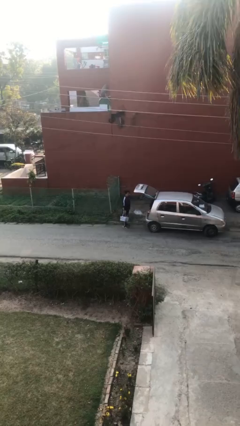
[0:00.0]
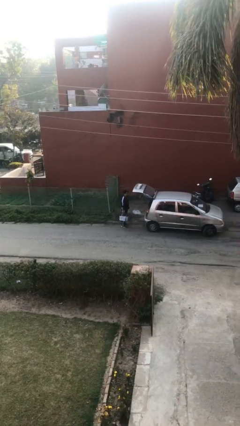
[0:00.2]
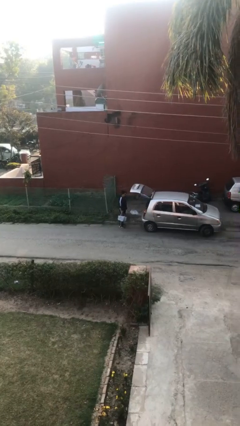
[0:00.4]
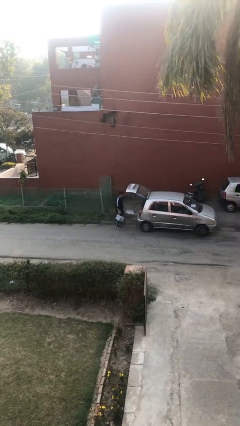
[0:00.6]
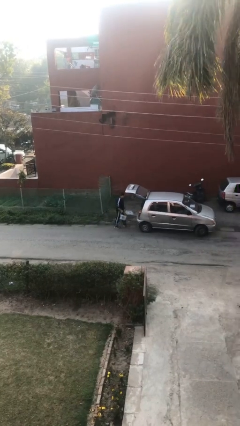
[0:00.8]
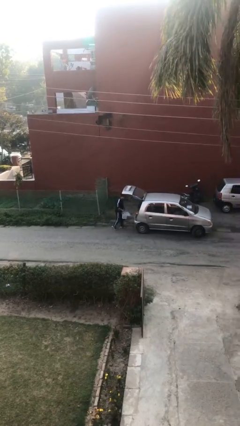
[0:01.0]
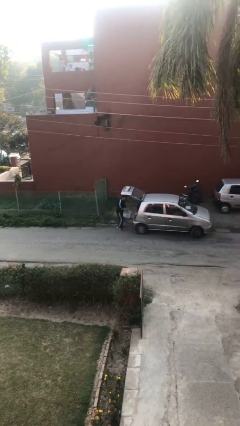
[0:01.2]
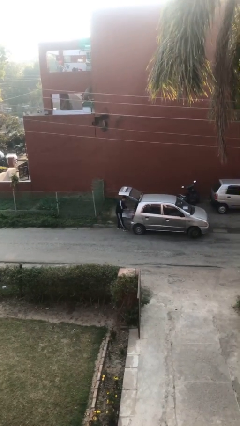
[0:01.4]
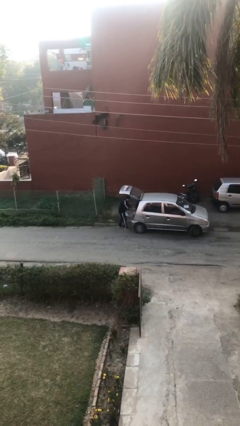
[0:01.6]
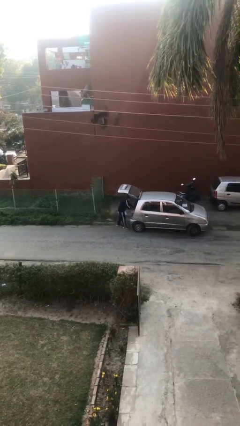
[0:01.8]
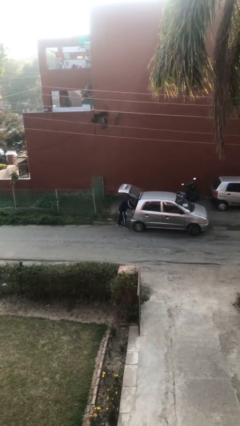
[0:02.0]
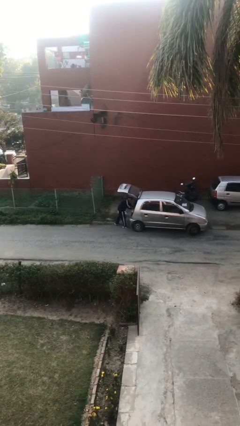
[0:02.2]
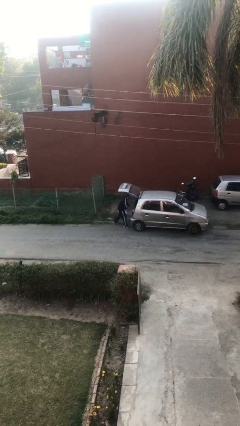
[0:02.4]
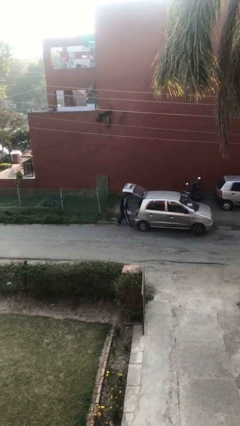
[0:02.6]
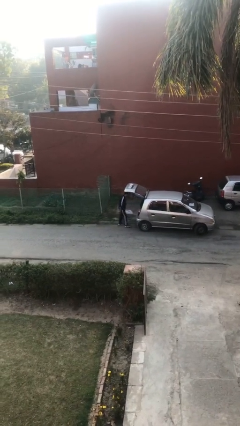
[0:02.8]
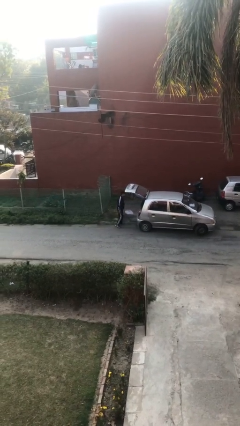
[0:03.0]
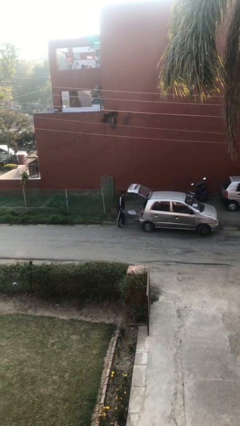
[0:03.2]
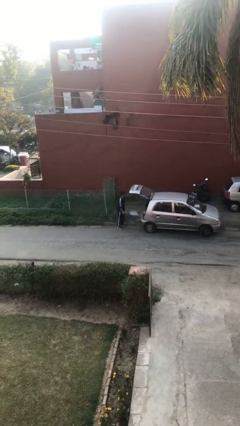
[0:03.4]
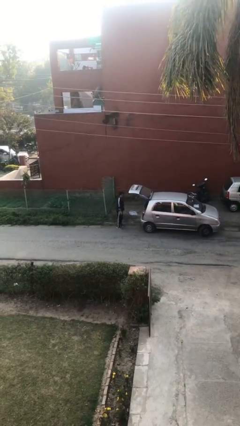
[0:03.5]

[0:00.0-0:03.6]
person loads car

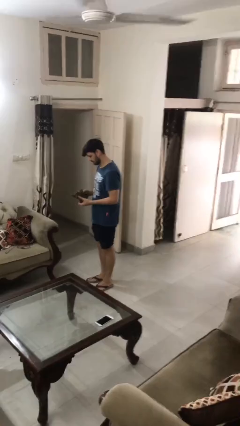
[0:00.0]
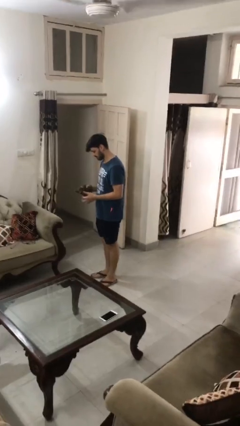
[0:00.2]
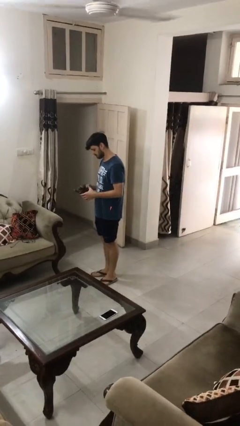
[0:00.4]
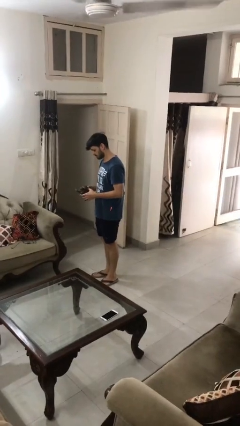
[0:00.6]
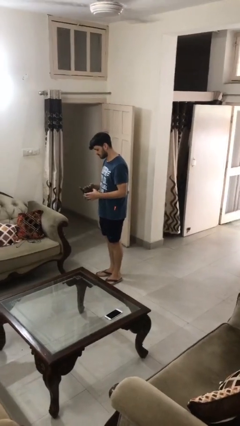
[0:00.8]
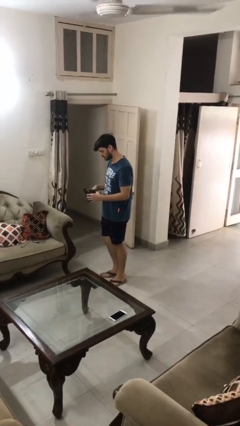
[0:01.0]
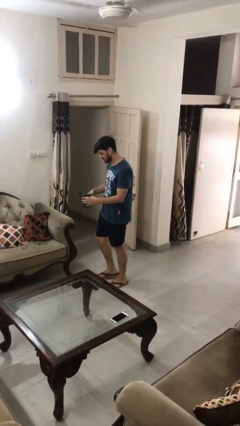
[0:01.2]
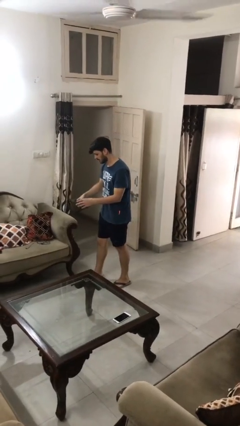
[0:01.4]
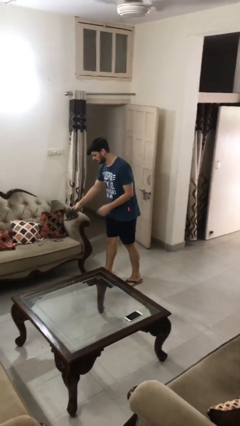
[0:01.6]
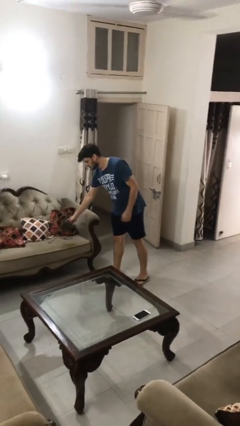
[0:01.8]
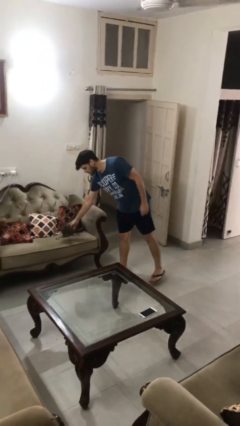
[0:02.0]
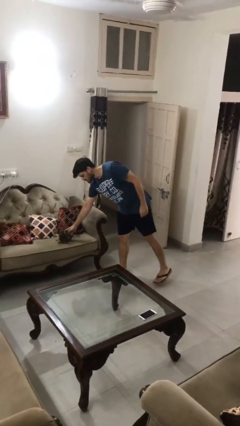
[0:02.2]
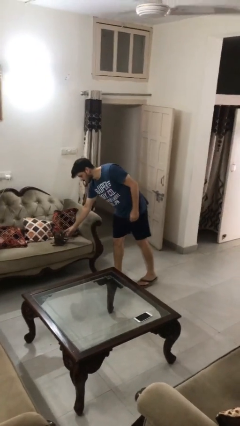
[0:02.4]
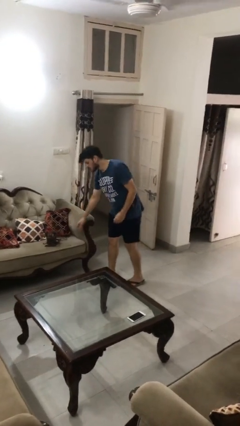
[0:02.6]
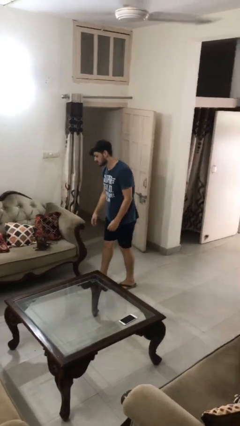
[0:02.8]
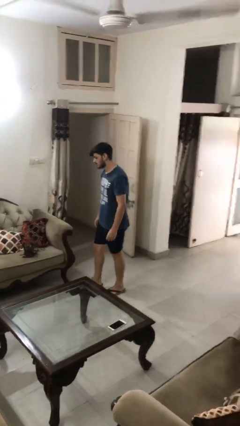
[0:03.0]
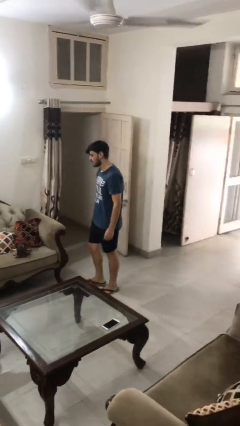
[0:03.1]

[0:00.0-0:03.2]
person puts down object on couch

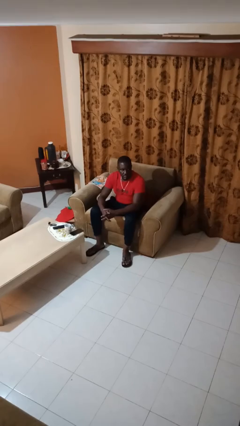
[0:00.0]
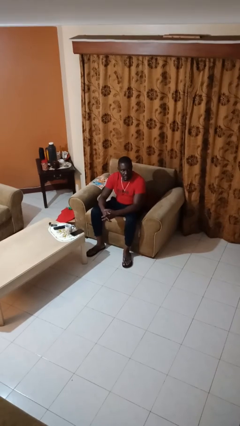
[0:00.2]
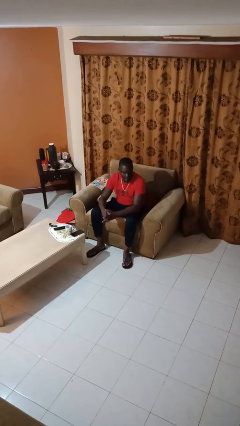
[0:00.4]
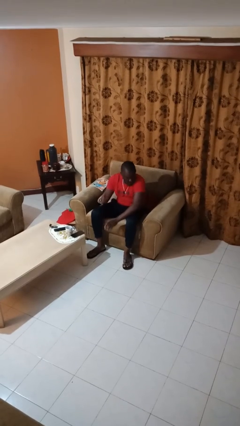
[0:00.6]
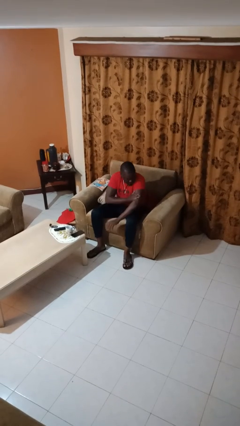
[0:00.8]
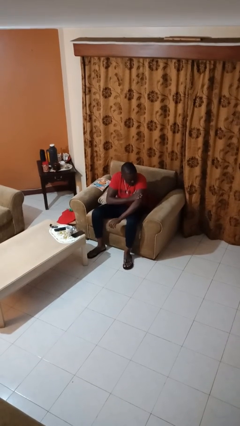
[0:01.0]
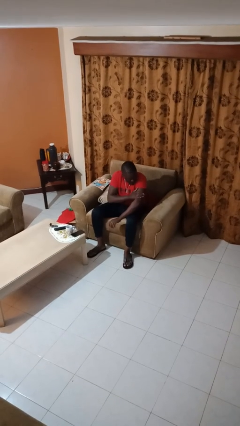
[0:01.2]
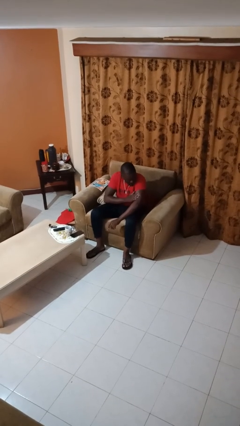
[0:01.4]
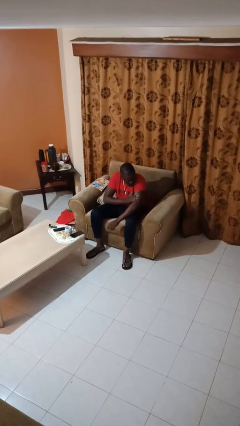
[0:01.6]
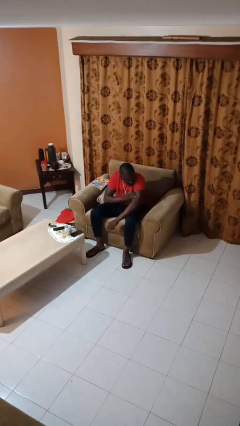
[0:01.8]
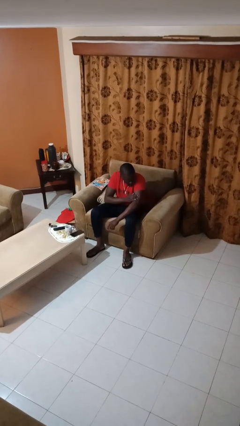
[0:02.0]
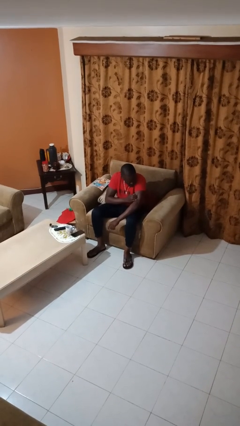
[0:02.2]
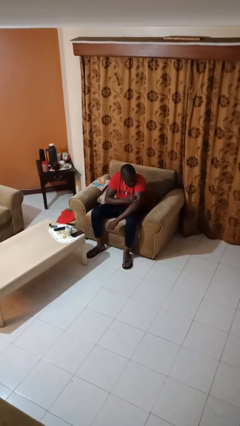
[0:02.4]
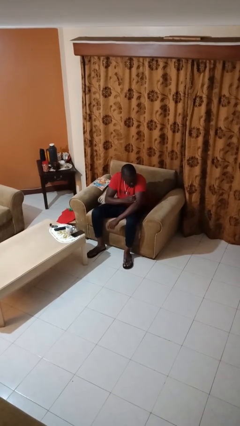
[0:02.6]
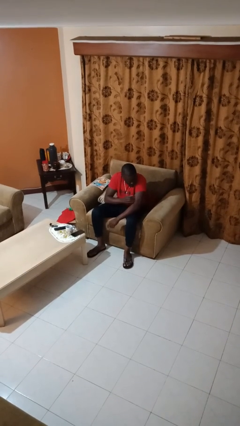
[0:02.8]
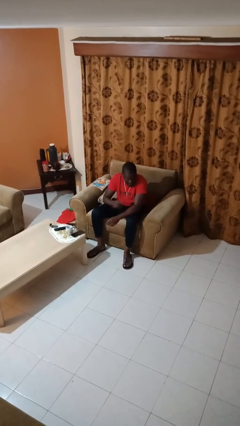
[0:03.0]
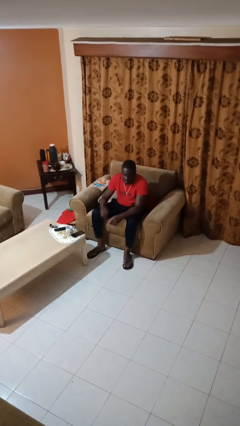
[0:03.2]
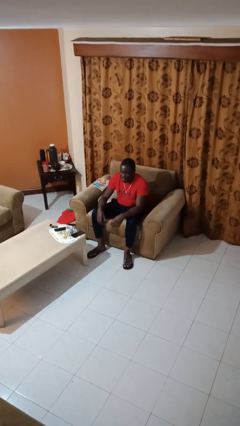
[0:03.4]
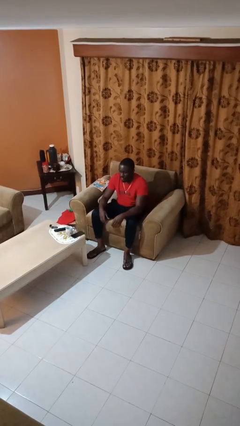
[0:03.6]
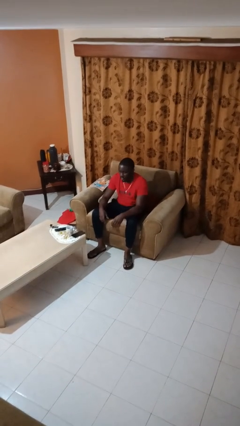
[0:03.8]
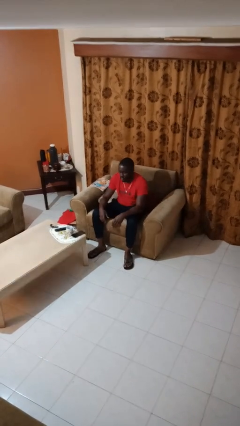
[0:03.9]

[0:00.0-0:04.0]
person swats bug

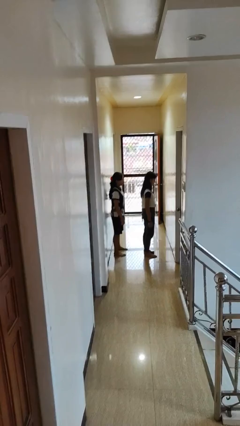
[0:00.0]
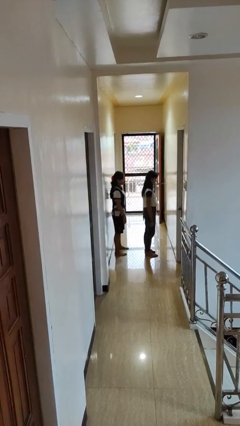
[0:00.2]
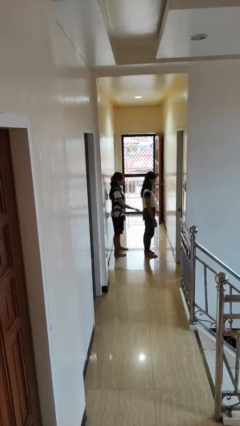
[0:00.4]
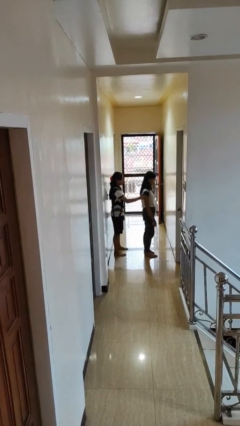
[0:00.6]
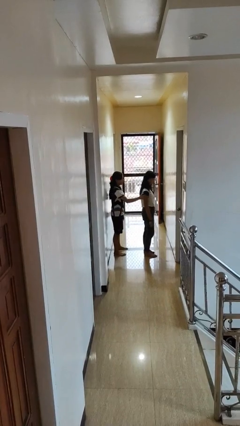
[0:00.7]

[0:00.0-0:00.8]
person grabs person by shoulder

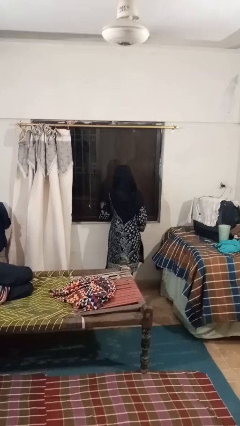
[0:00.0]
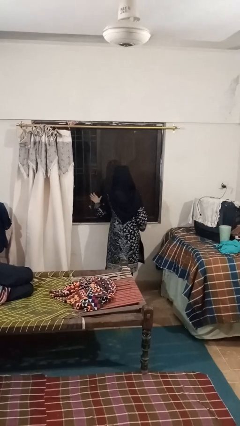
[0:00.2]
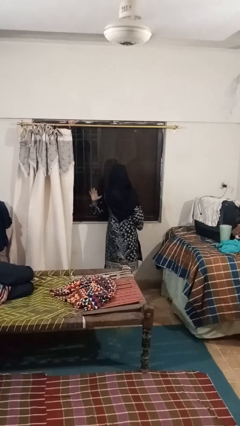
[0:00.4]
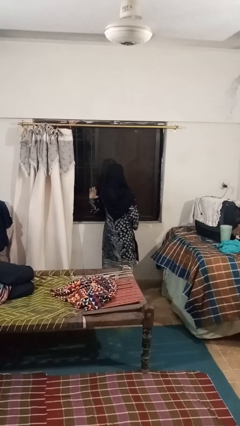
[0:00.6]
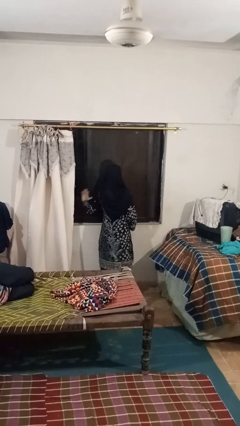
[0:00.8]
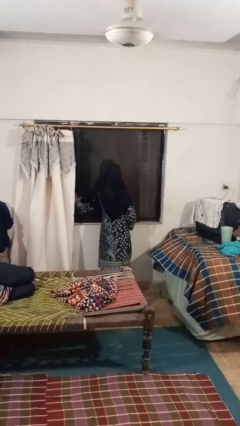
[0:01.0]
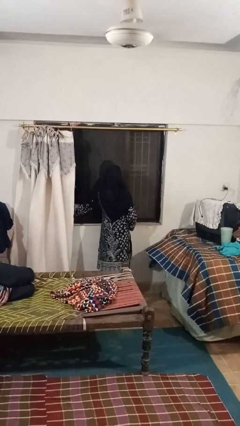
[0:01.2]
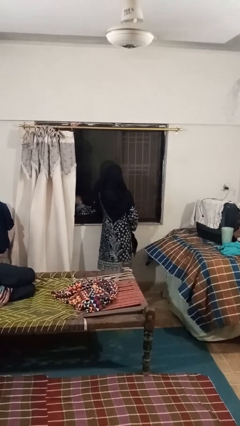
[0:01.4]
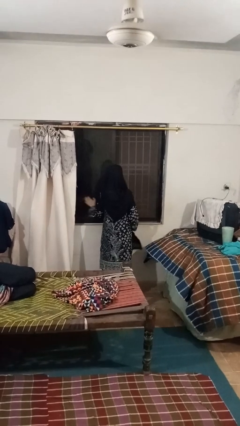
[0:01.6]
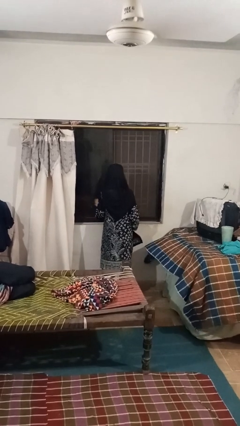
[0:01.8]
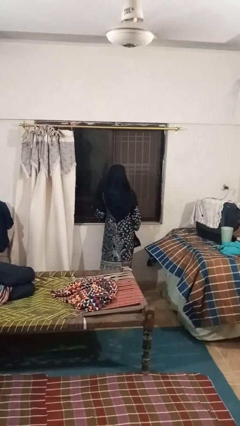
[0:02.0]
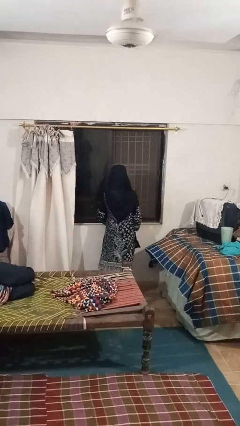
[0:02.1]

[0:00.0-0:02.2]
person opens sliding door

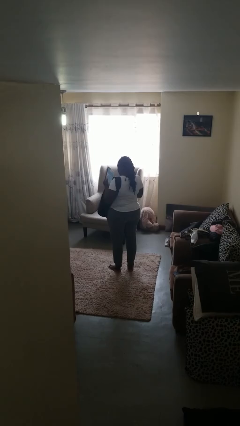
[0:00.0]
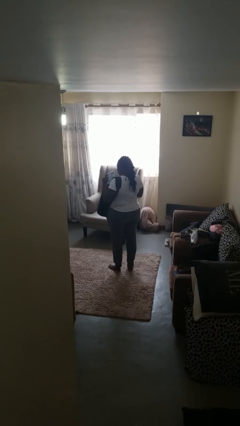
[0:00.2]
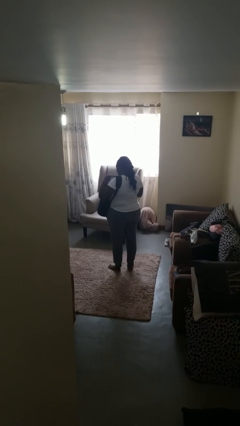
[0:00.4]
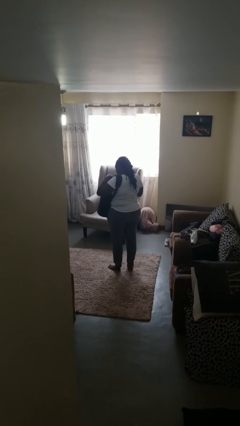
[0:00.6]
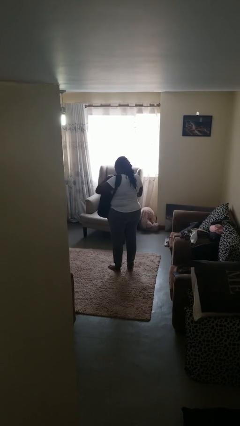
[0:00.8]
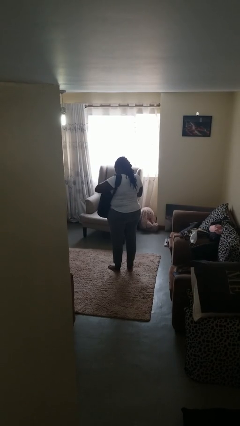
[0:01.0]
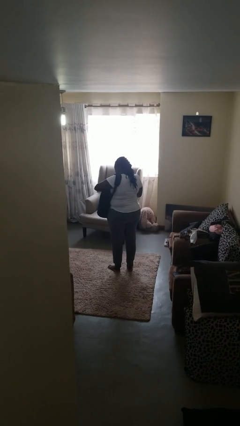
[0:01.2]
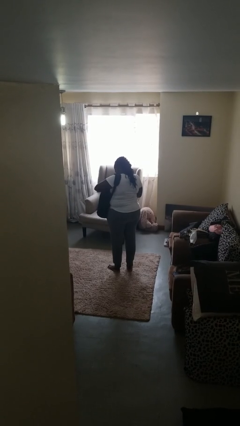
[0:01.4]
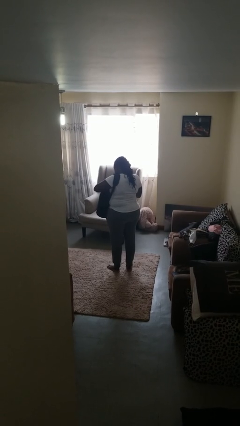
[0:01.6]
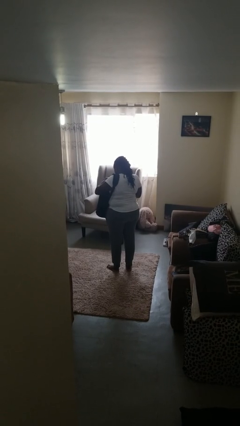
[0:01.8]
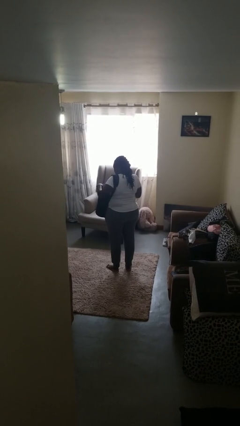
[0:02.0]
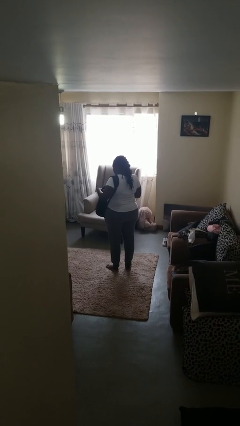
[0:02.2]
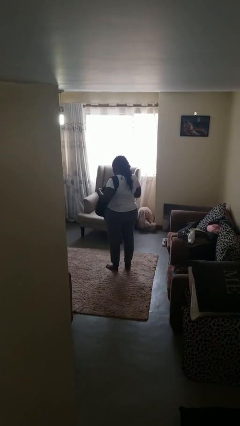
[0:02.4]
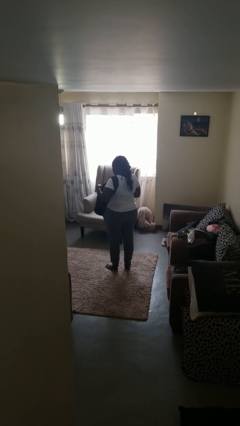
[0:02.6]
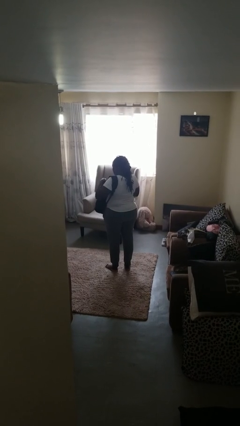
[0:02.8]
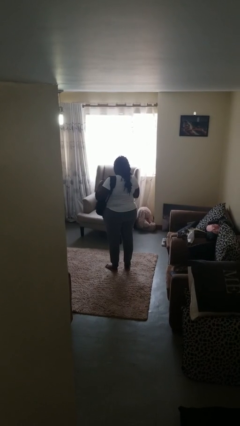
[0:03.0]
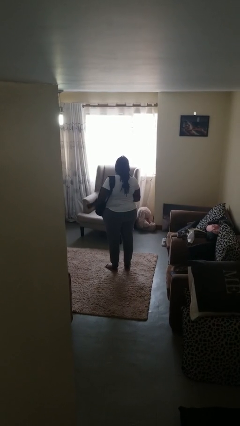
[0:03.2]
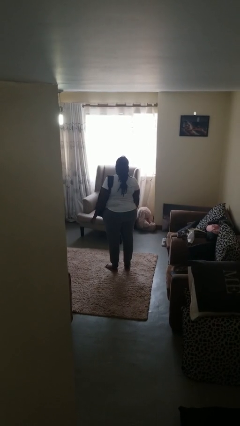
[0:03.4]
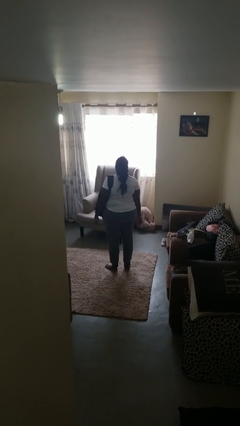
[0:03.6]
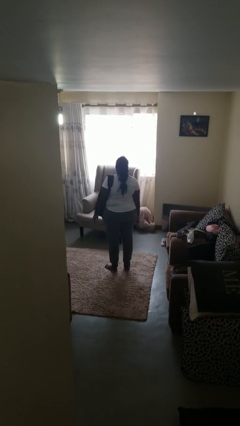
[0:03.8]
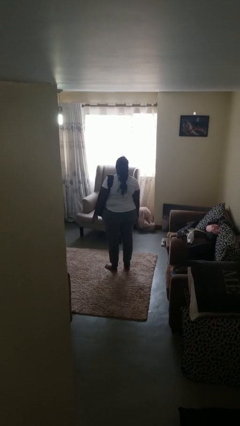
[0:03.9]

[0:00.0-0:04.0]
person puts object into backpack
